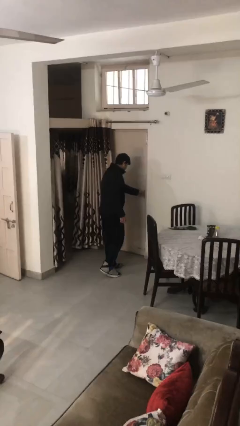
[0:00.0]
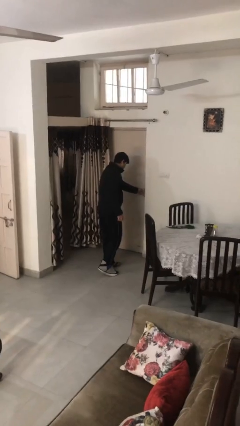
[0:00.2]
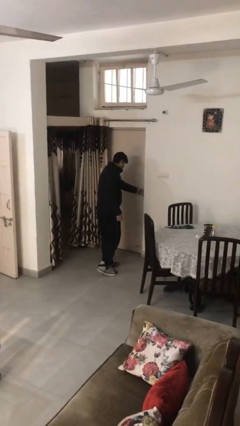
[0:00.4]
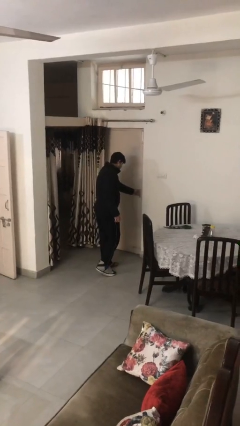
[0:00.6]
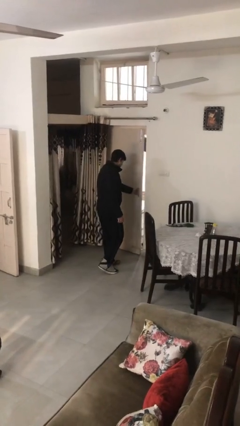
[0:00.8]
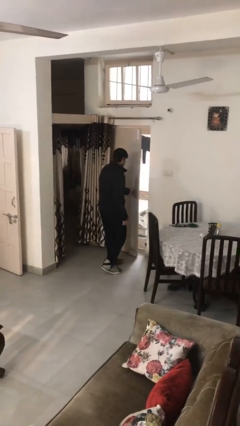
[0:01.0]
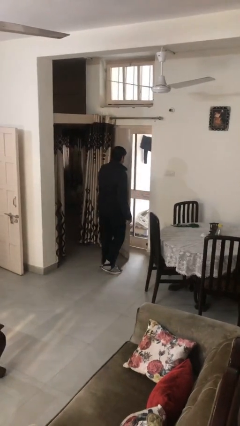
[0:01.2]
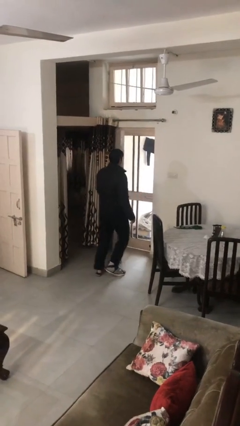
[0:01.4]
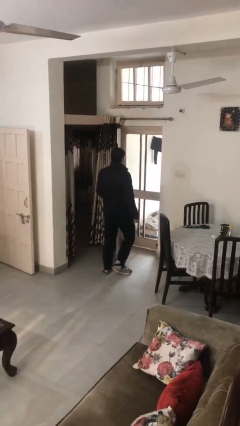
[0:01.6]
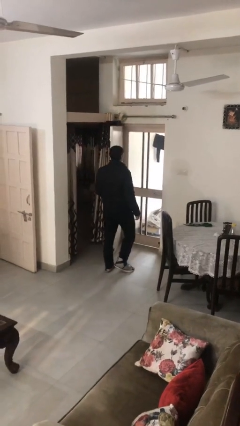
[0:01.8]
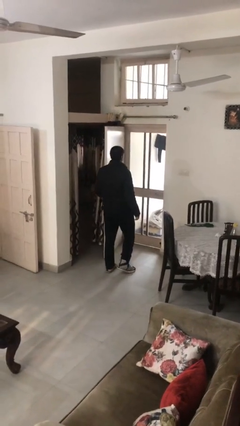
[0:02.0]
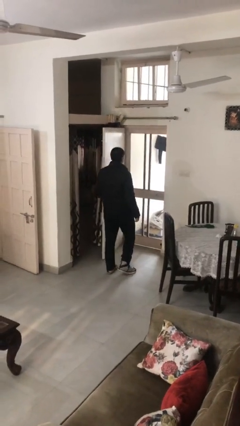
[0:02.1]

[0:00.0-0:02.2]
person opens facility door

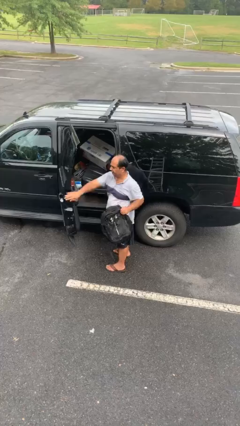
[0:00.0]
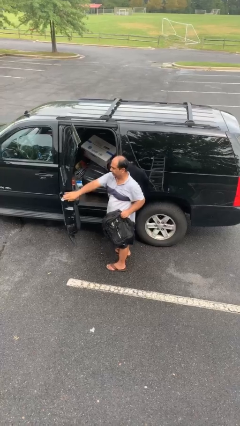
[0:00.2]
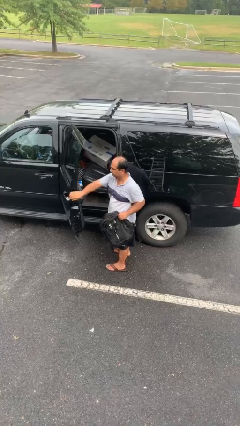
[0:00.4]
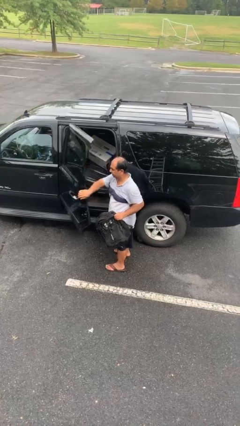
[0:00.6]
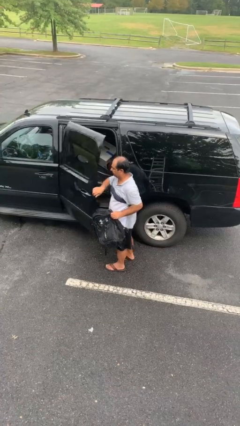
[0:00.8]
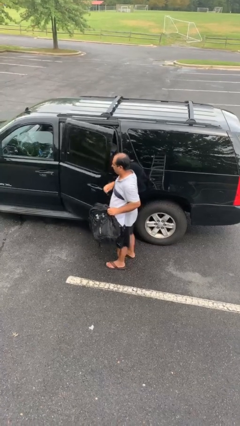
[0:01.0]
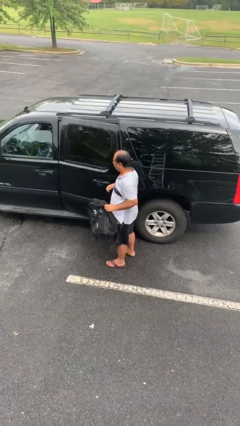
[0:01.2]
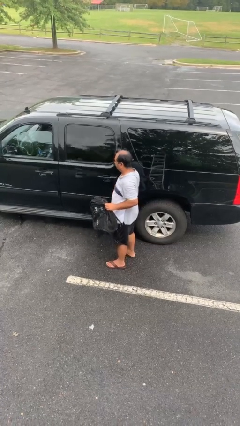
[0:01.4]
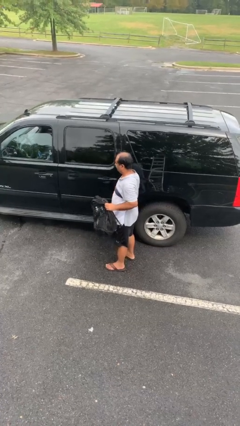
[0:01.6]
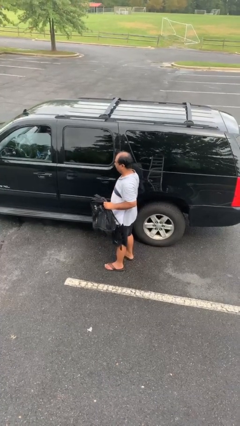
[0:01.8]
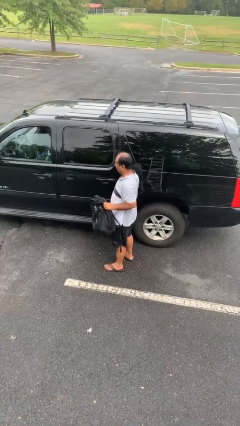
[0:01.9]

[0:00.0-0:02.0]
person closes car door

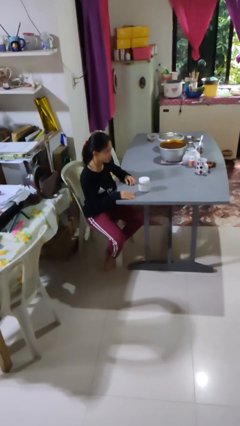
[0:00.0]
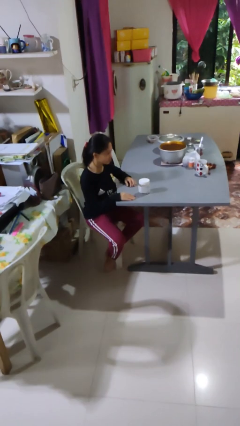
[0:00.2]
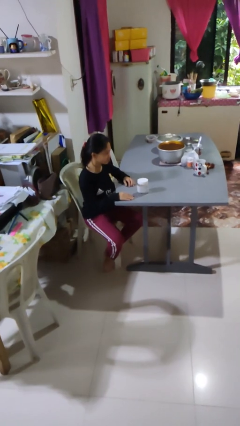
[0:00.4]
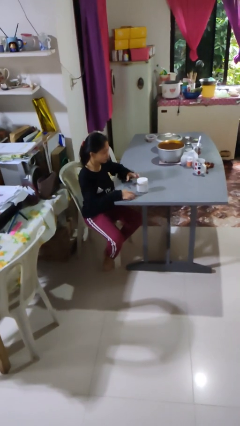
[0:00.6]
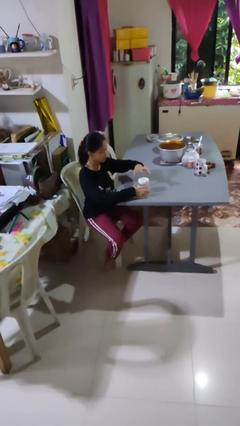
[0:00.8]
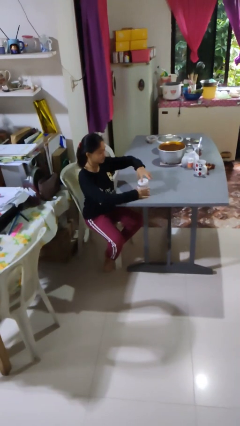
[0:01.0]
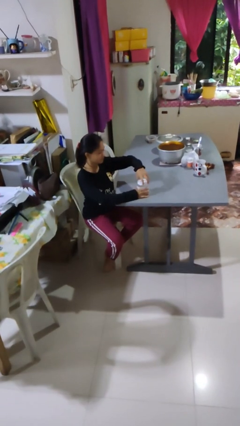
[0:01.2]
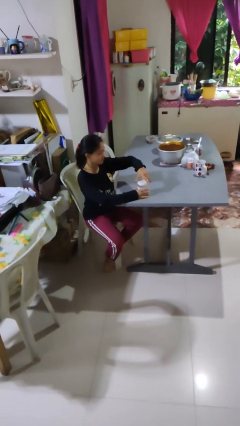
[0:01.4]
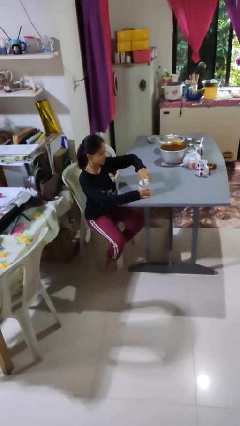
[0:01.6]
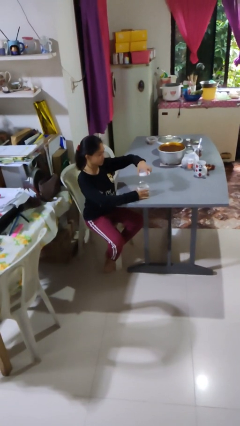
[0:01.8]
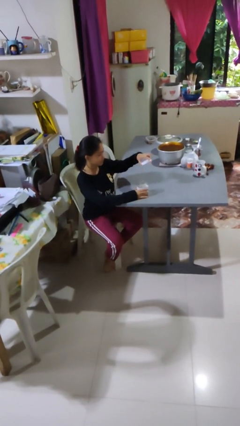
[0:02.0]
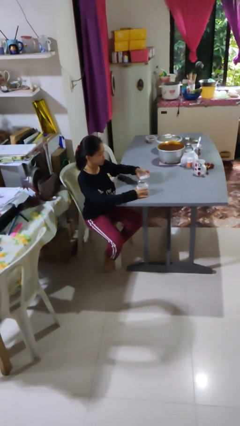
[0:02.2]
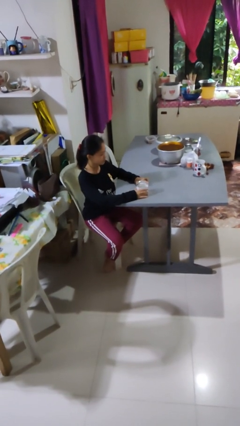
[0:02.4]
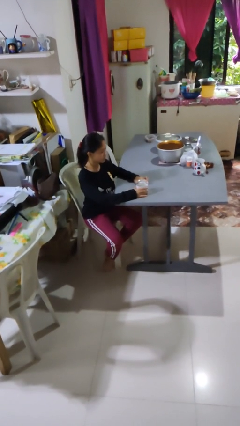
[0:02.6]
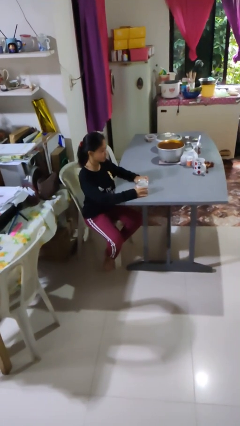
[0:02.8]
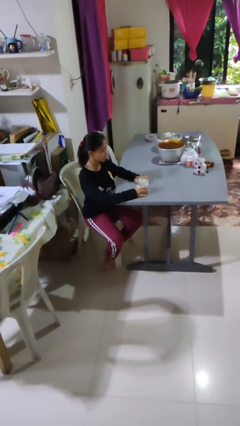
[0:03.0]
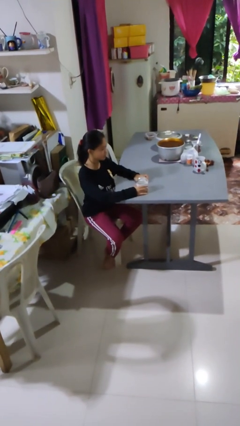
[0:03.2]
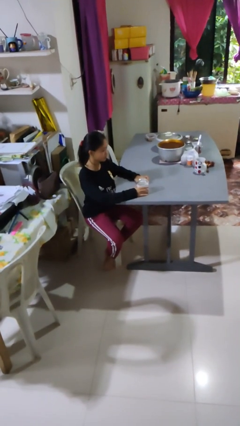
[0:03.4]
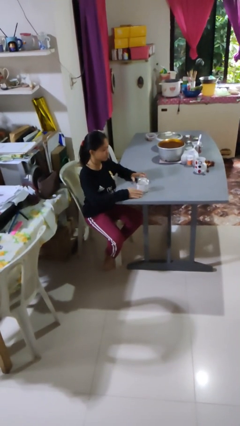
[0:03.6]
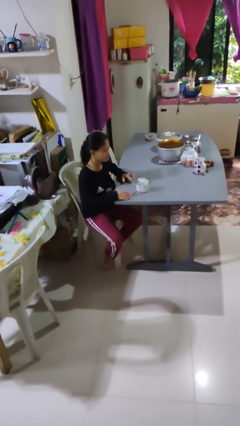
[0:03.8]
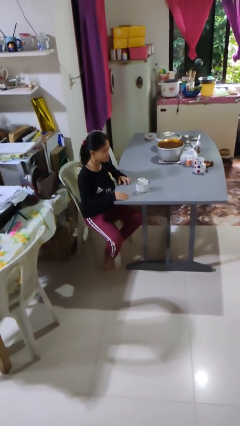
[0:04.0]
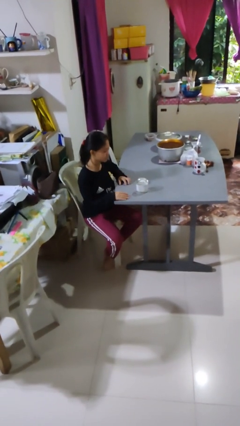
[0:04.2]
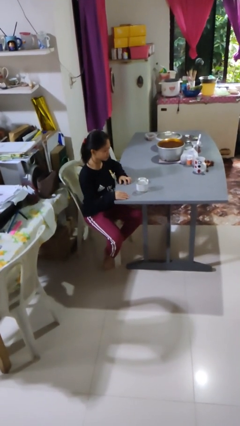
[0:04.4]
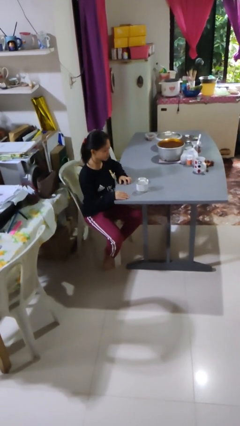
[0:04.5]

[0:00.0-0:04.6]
person opens jar

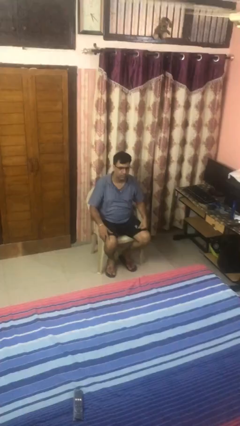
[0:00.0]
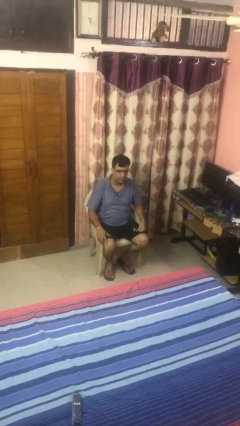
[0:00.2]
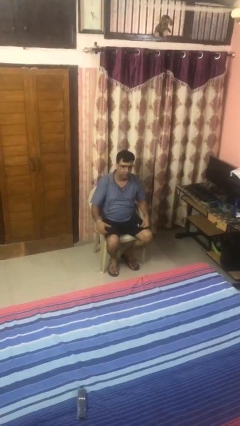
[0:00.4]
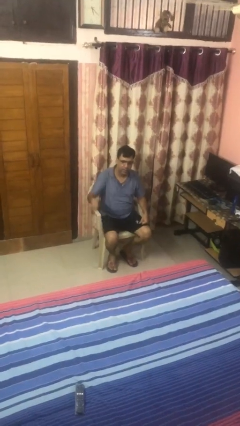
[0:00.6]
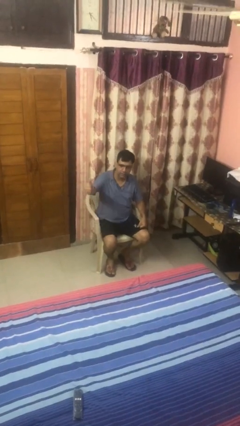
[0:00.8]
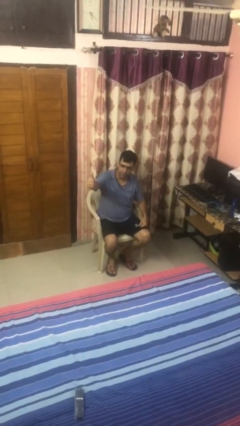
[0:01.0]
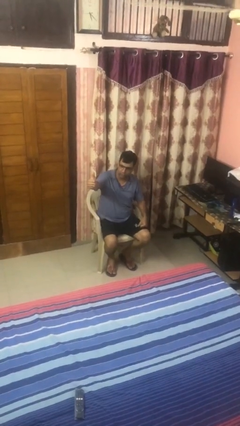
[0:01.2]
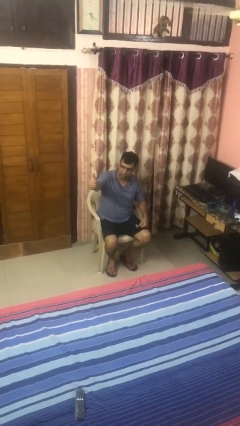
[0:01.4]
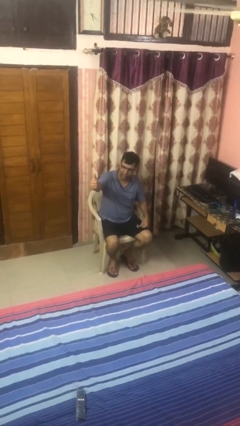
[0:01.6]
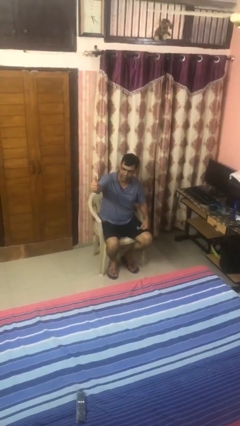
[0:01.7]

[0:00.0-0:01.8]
person gestures thumbs up

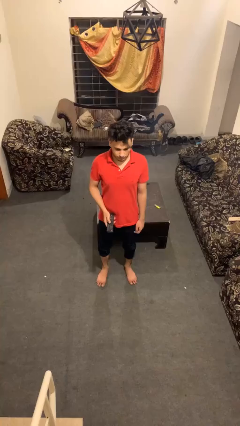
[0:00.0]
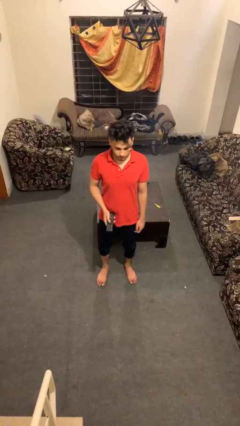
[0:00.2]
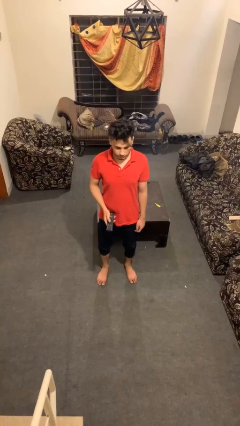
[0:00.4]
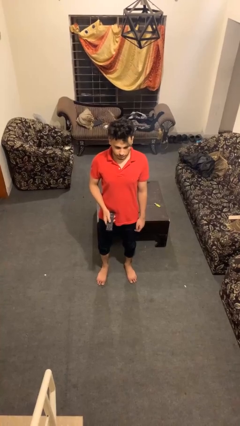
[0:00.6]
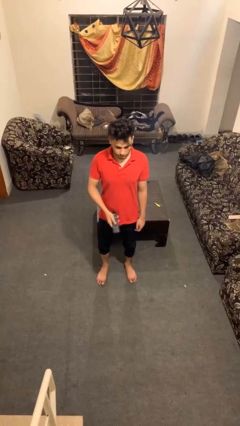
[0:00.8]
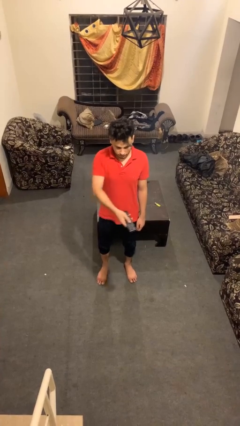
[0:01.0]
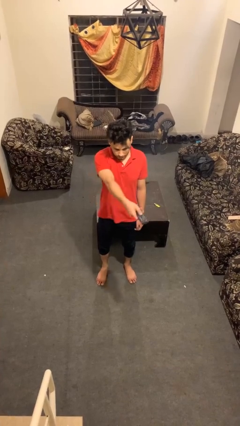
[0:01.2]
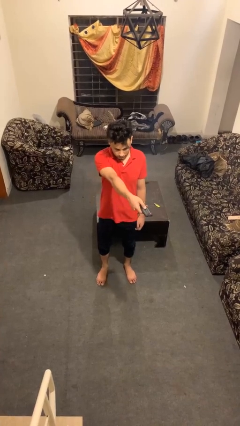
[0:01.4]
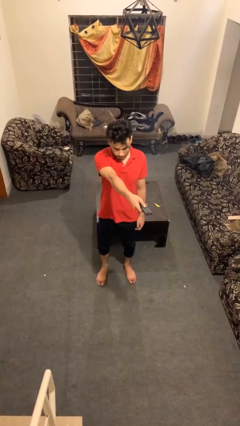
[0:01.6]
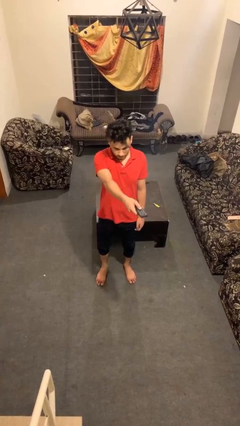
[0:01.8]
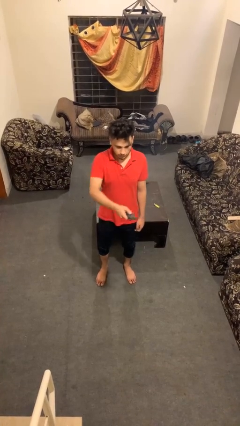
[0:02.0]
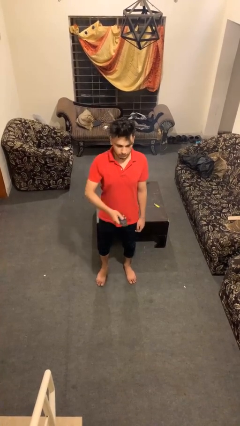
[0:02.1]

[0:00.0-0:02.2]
person uses television remote

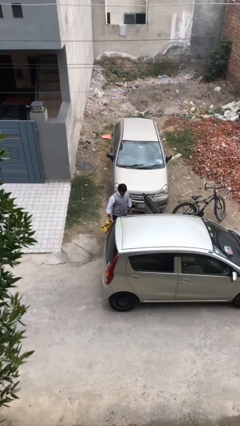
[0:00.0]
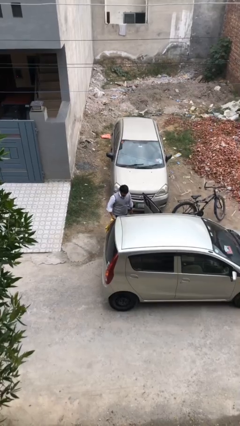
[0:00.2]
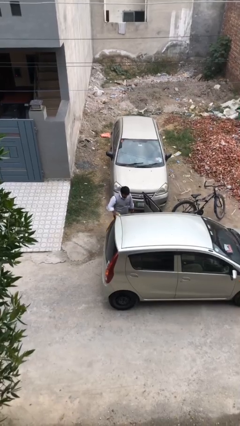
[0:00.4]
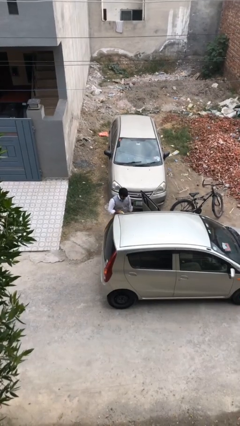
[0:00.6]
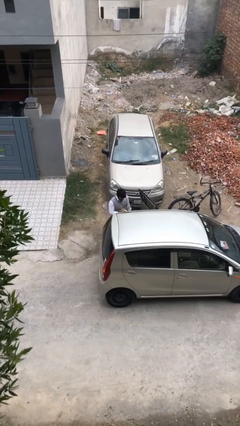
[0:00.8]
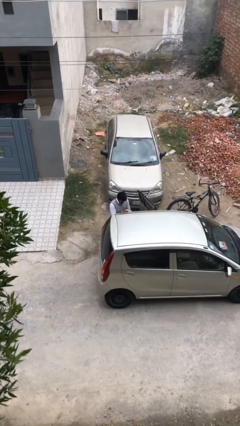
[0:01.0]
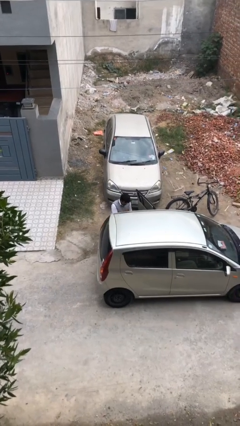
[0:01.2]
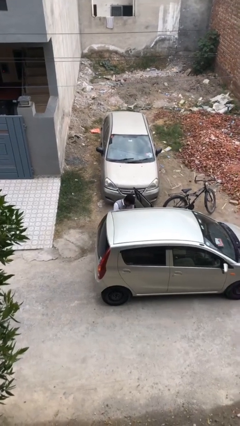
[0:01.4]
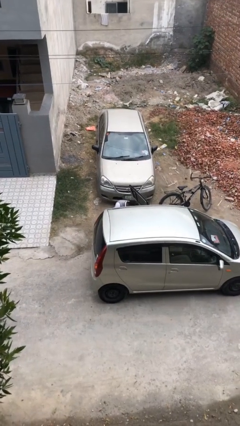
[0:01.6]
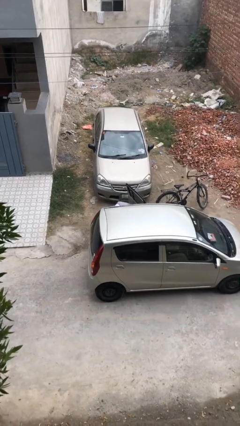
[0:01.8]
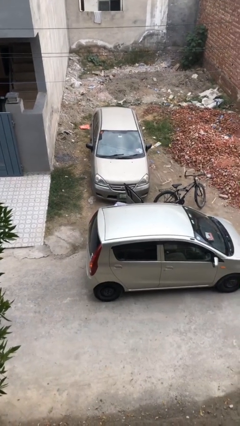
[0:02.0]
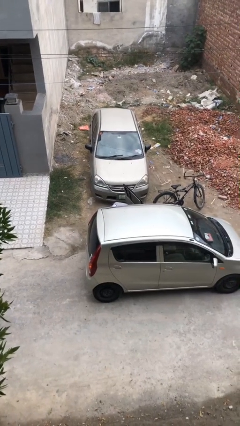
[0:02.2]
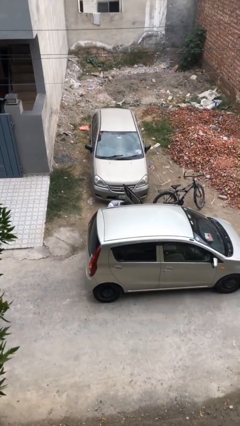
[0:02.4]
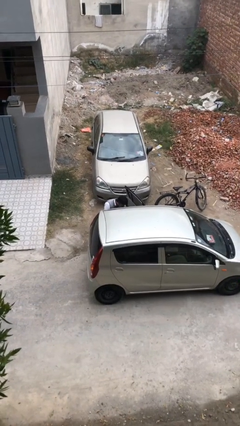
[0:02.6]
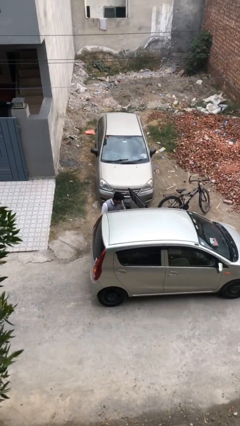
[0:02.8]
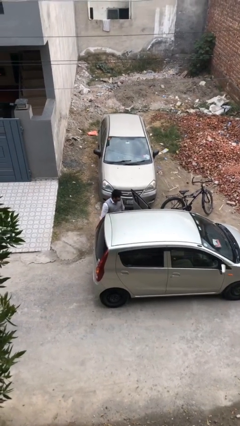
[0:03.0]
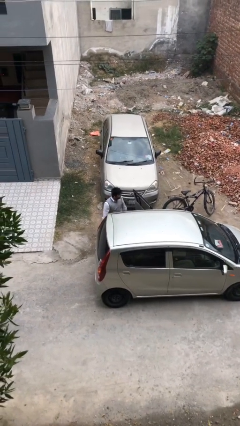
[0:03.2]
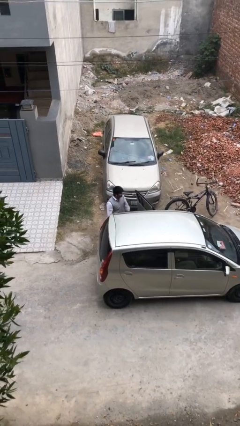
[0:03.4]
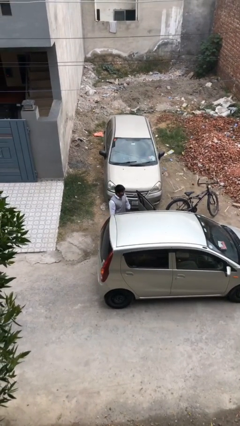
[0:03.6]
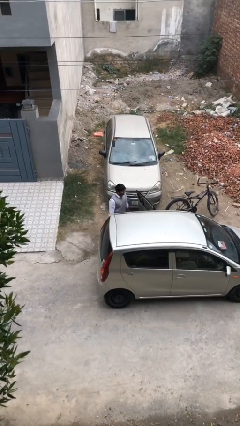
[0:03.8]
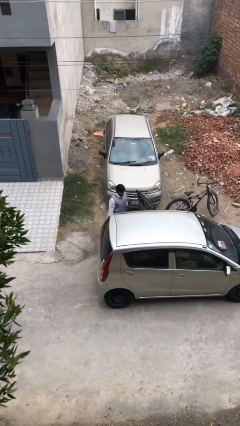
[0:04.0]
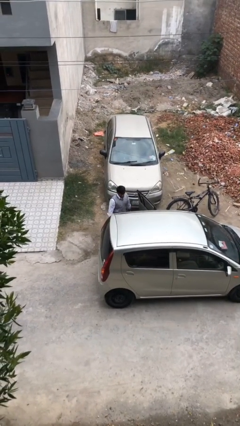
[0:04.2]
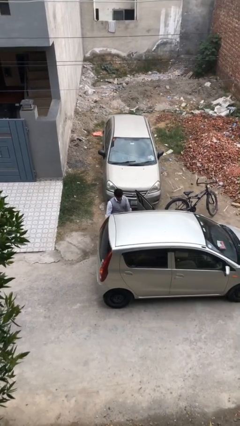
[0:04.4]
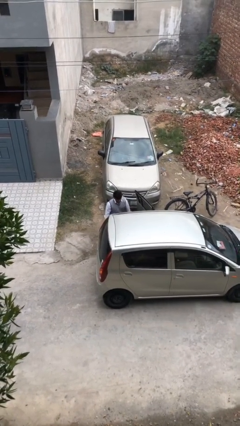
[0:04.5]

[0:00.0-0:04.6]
person loads car
